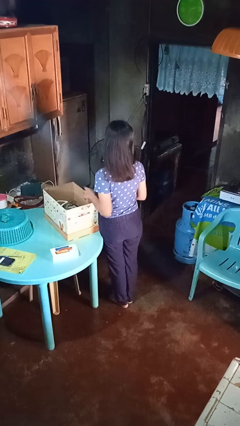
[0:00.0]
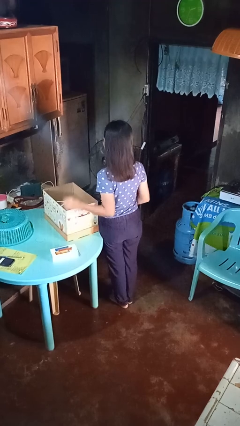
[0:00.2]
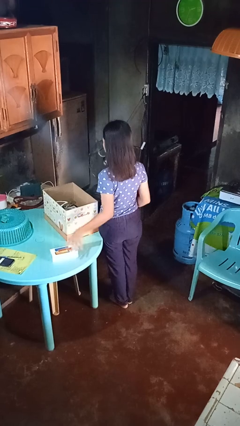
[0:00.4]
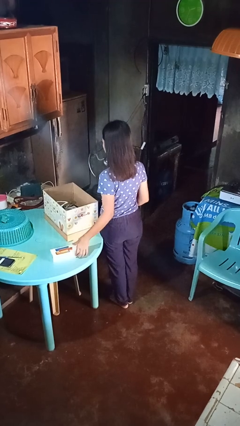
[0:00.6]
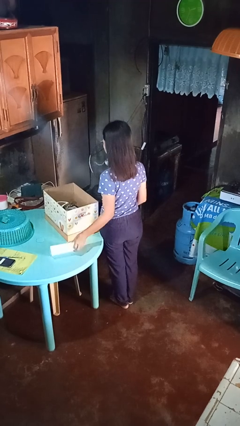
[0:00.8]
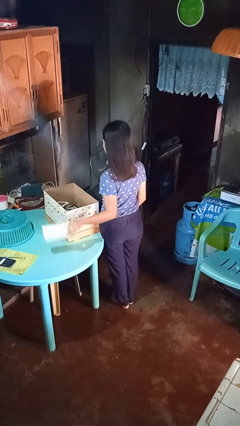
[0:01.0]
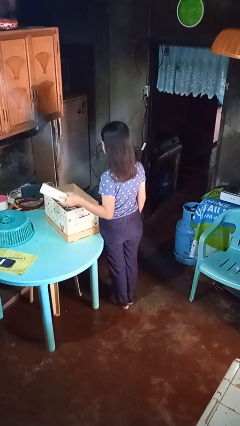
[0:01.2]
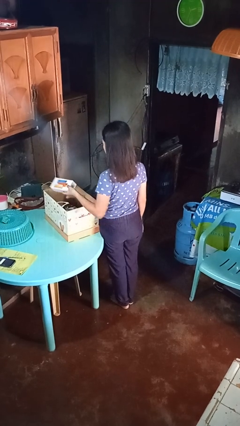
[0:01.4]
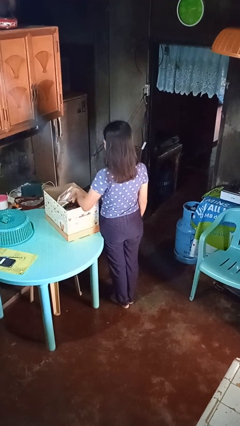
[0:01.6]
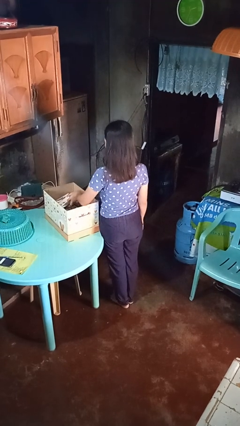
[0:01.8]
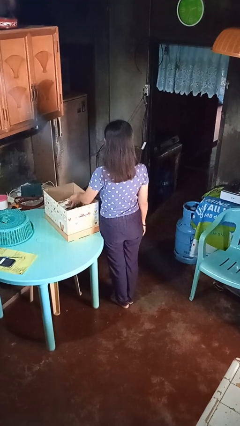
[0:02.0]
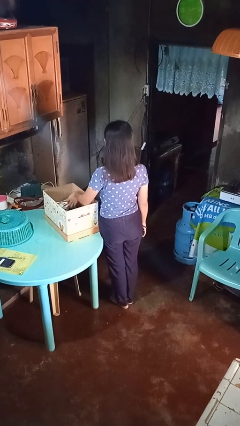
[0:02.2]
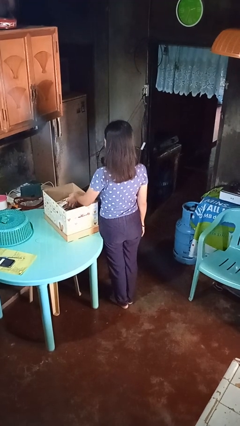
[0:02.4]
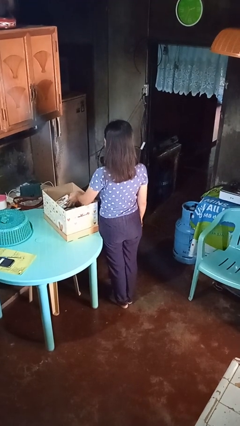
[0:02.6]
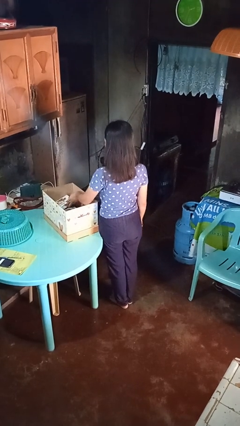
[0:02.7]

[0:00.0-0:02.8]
person puts object into box

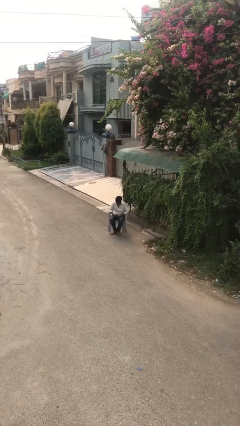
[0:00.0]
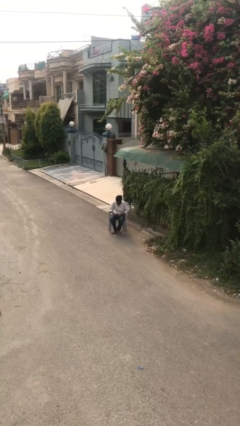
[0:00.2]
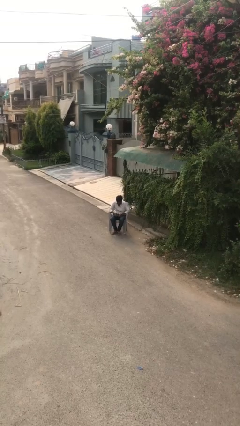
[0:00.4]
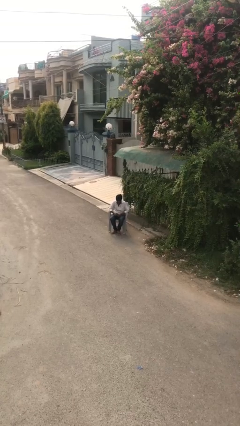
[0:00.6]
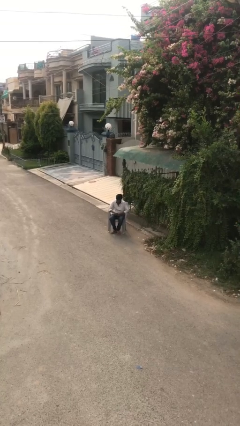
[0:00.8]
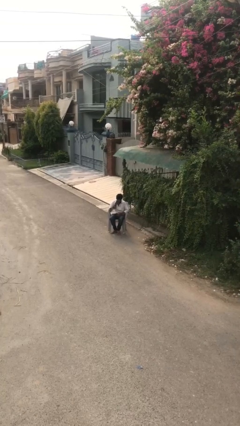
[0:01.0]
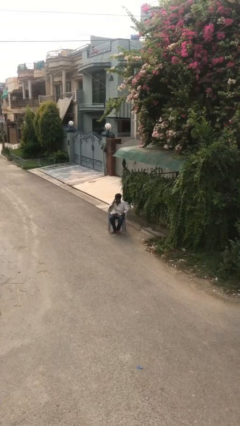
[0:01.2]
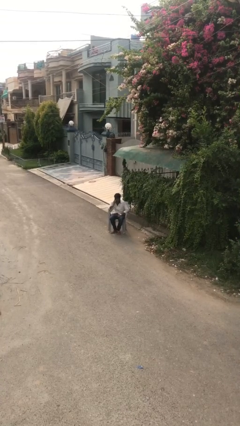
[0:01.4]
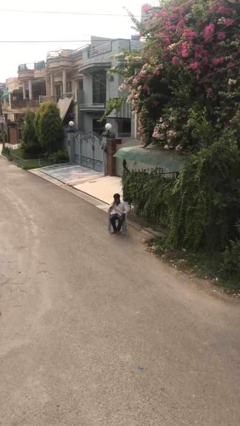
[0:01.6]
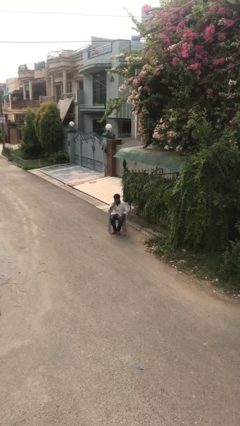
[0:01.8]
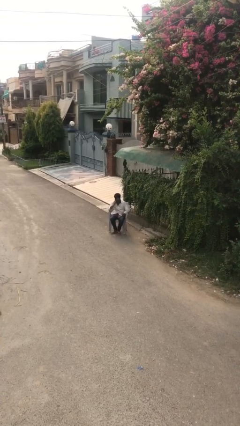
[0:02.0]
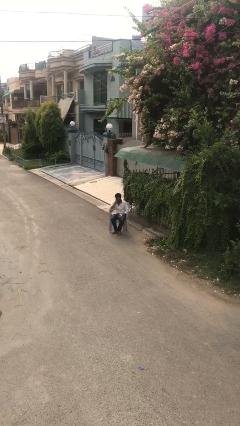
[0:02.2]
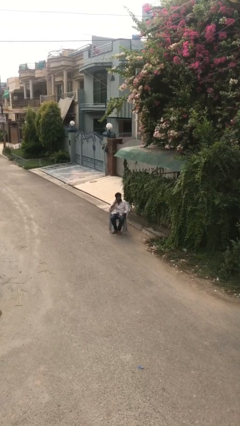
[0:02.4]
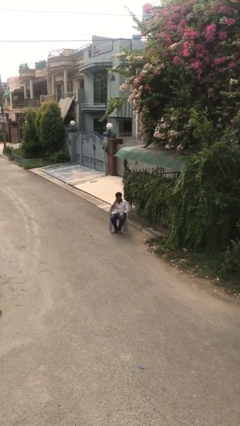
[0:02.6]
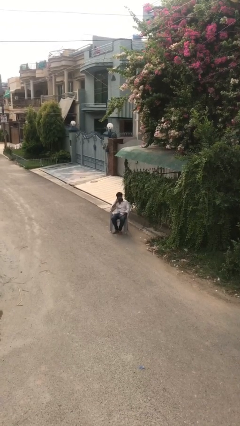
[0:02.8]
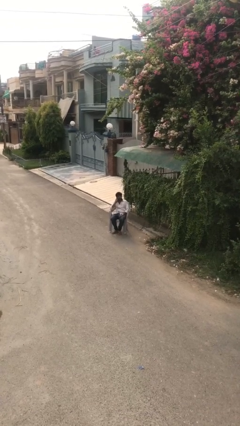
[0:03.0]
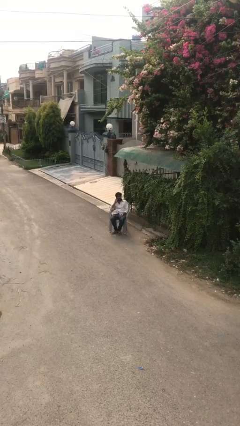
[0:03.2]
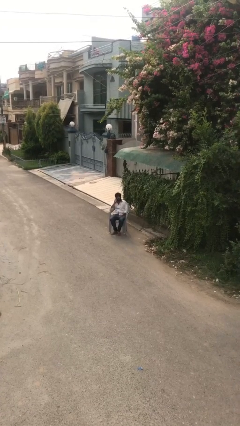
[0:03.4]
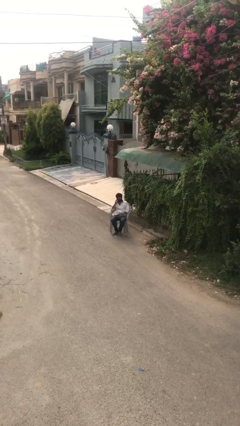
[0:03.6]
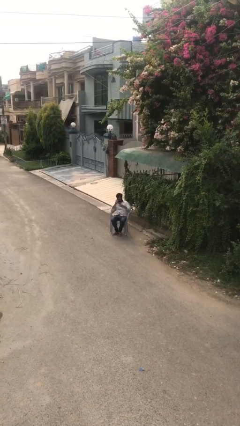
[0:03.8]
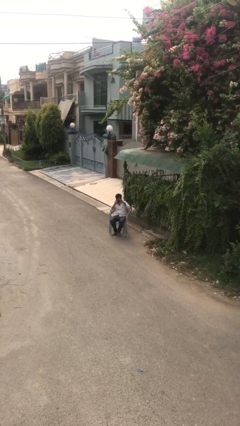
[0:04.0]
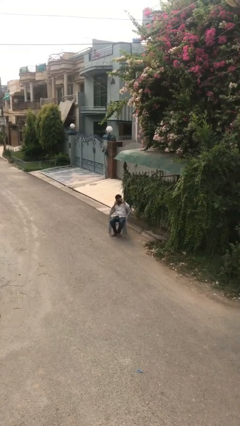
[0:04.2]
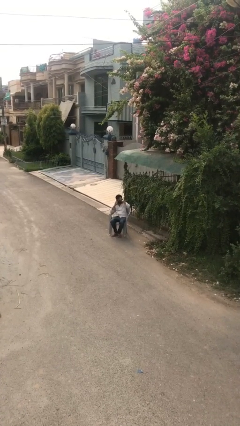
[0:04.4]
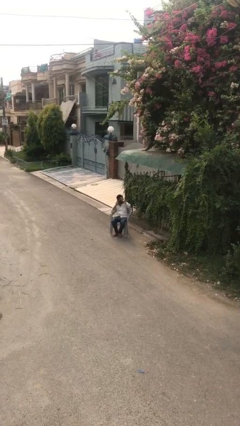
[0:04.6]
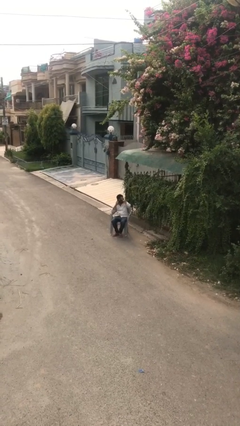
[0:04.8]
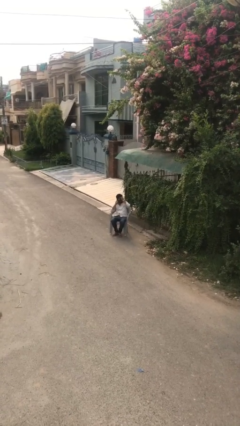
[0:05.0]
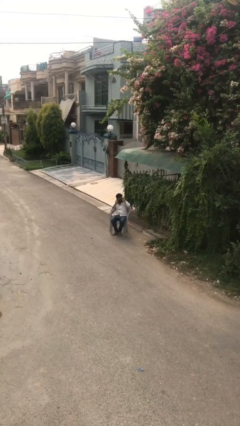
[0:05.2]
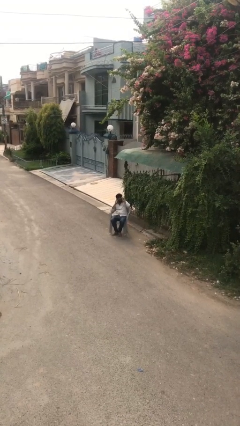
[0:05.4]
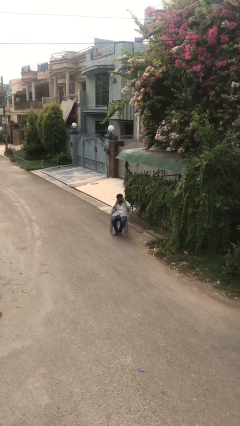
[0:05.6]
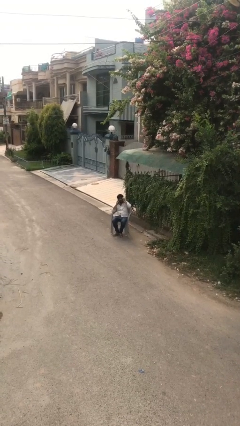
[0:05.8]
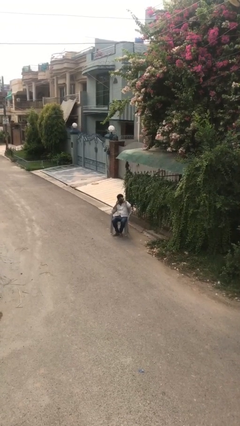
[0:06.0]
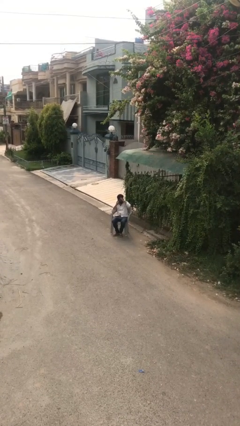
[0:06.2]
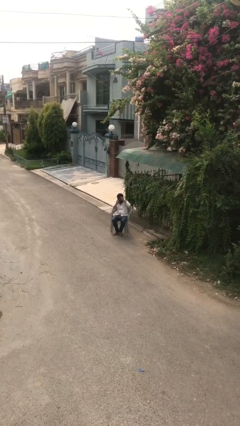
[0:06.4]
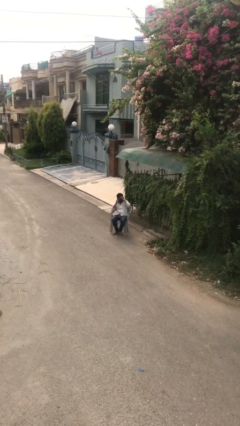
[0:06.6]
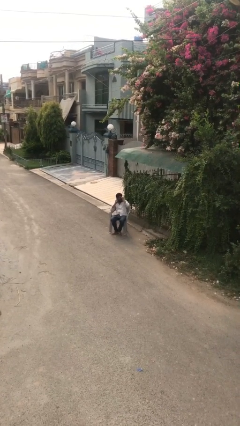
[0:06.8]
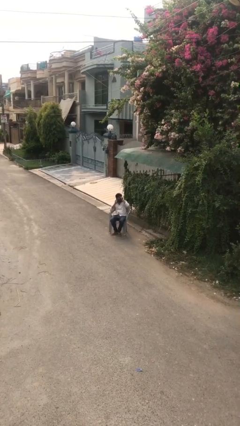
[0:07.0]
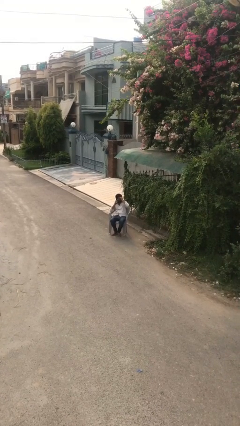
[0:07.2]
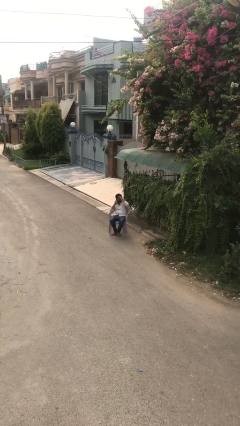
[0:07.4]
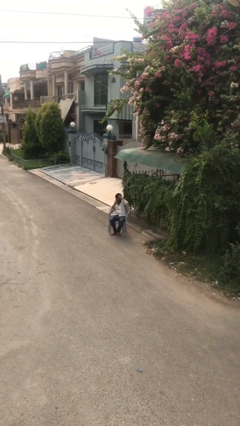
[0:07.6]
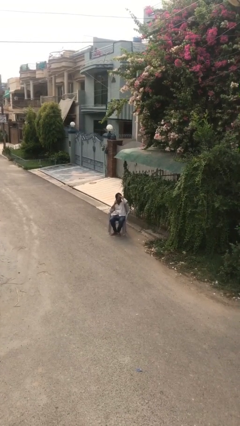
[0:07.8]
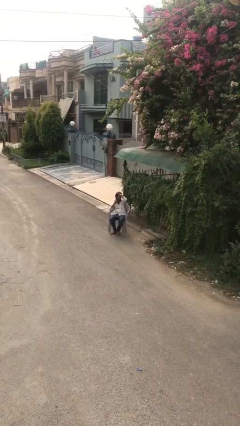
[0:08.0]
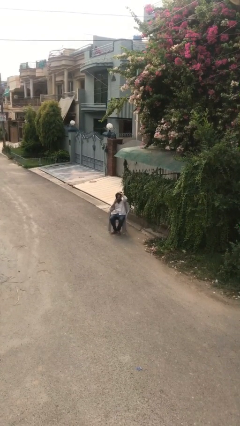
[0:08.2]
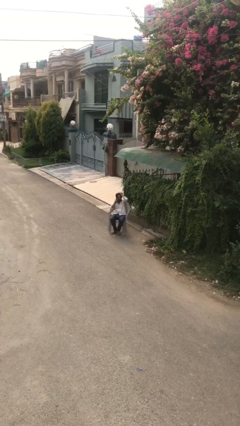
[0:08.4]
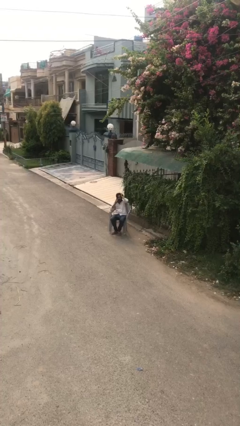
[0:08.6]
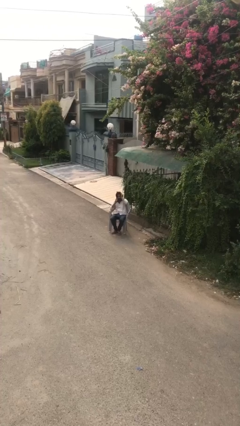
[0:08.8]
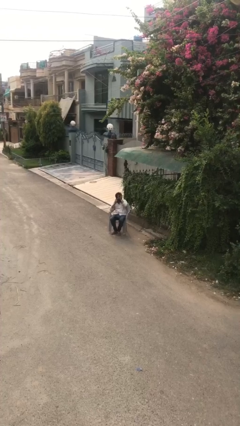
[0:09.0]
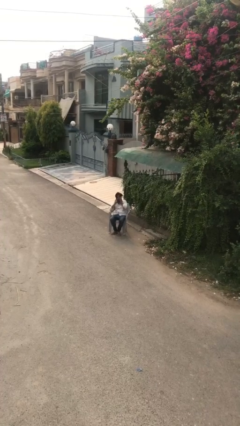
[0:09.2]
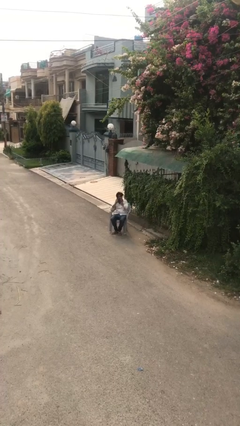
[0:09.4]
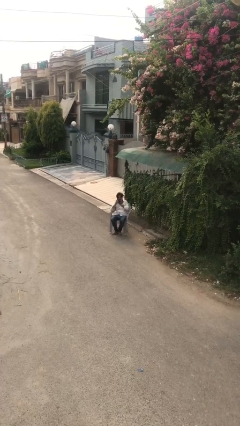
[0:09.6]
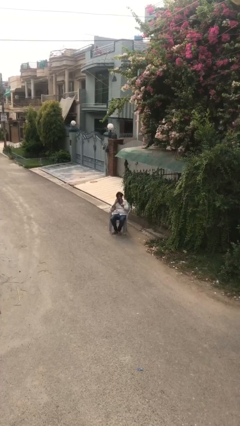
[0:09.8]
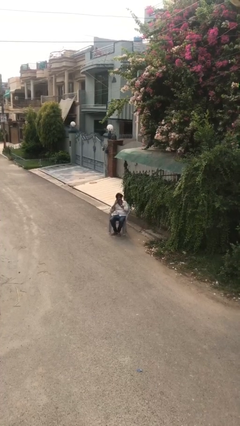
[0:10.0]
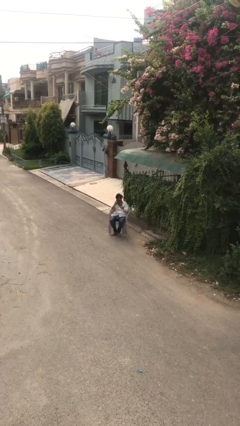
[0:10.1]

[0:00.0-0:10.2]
person talks on phone

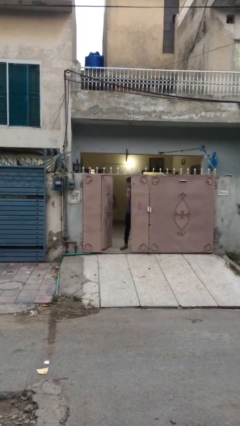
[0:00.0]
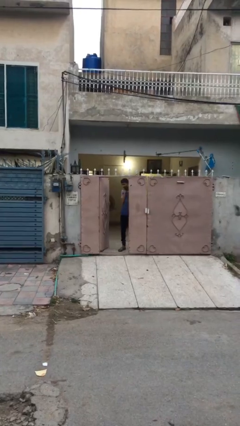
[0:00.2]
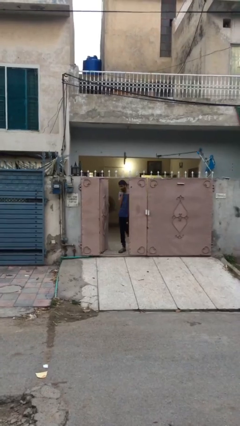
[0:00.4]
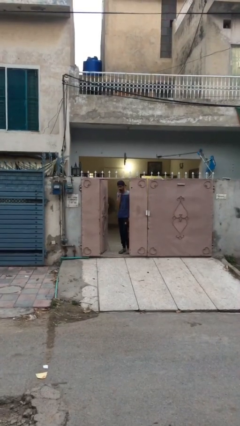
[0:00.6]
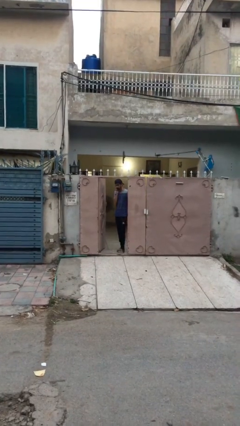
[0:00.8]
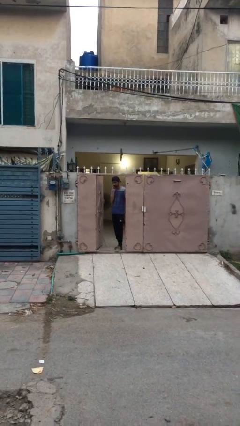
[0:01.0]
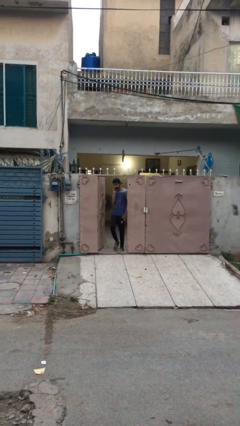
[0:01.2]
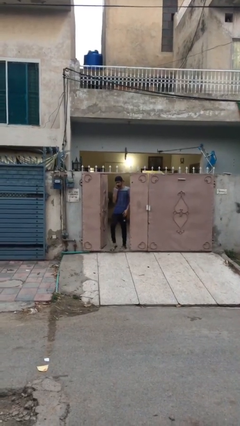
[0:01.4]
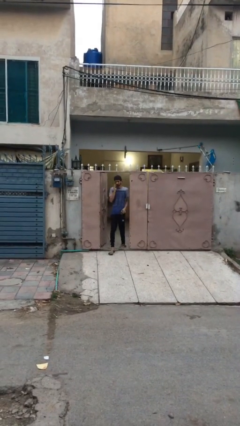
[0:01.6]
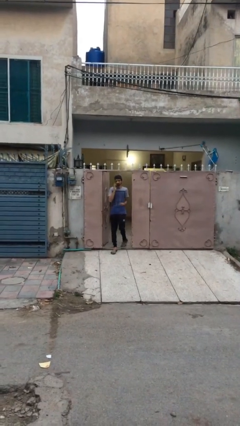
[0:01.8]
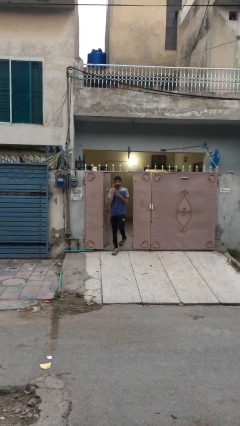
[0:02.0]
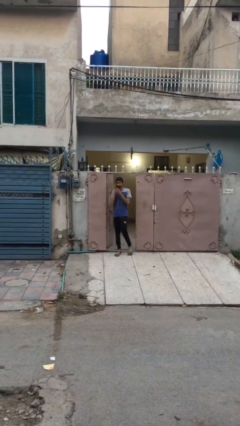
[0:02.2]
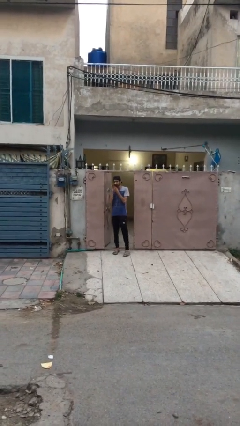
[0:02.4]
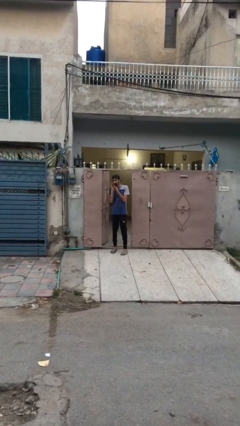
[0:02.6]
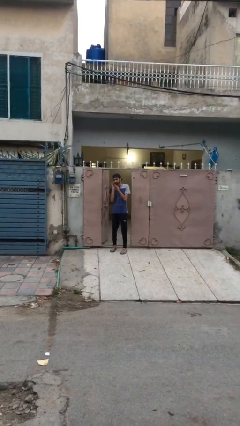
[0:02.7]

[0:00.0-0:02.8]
person enters scene through structure

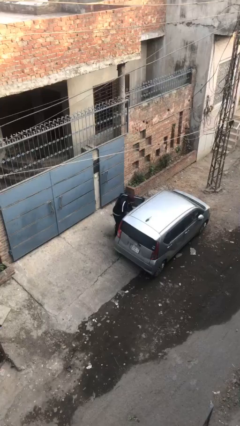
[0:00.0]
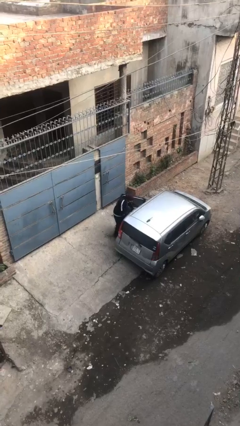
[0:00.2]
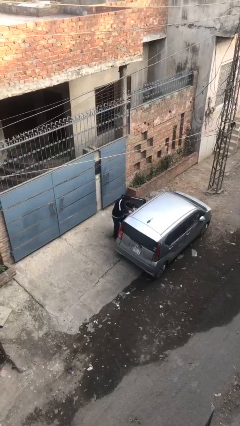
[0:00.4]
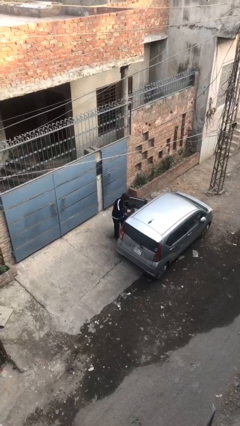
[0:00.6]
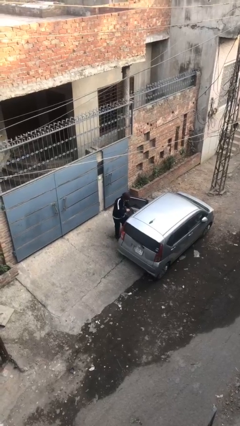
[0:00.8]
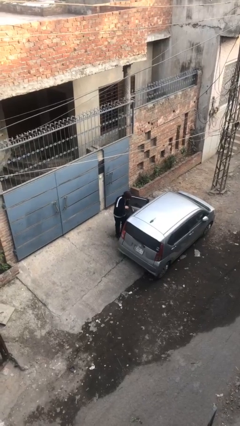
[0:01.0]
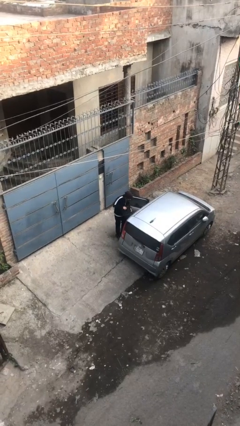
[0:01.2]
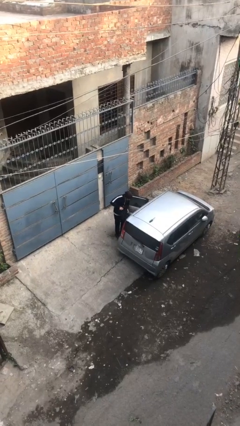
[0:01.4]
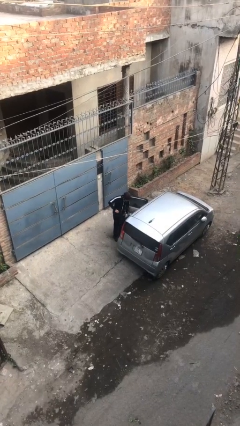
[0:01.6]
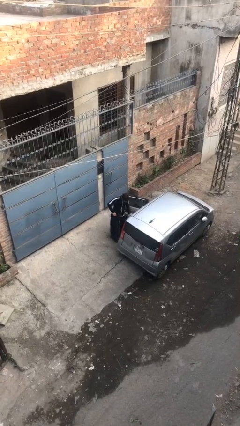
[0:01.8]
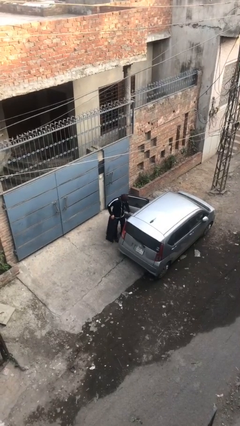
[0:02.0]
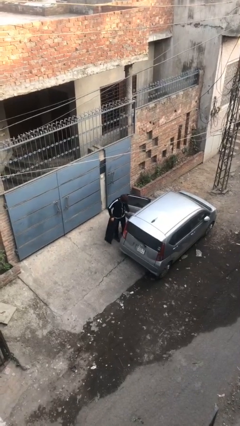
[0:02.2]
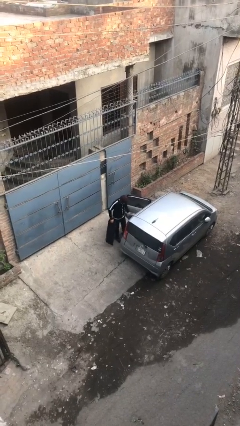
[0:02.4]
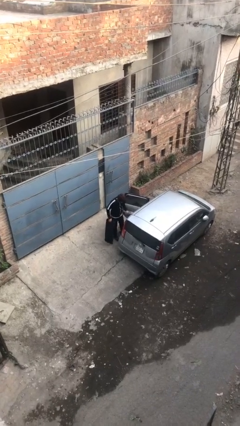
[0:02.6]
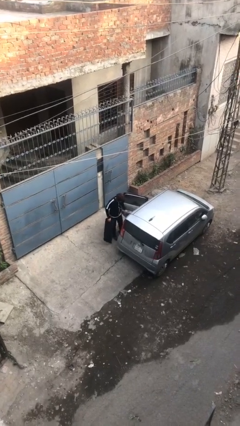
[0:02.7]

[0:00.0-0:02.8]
person unloads car
